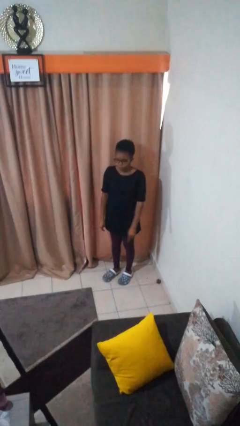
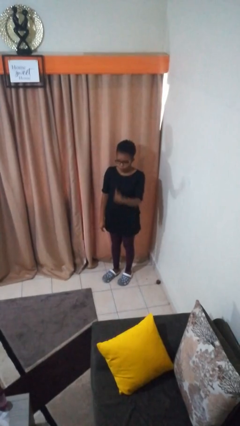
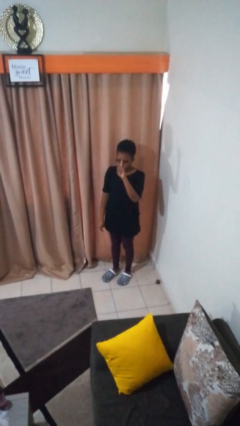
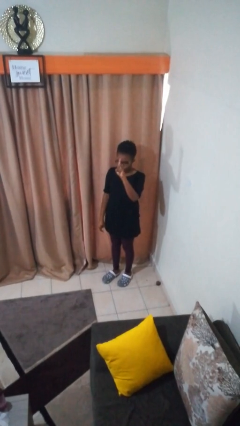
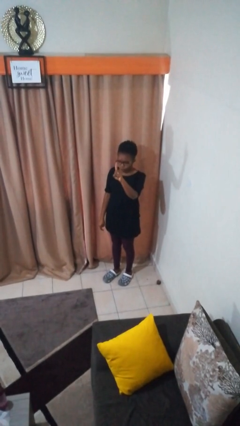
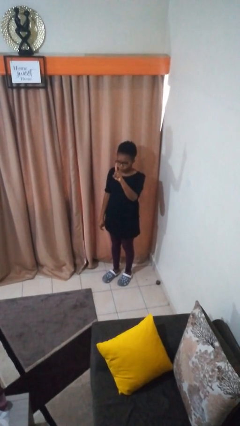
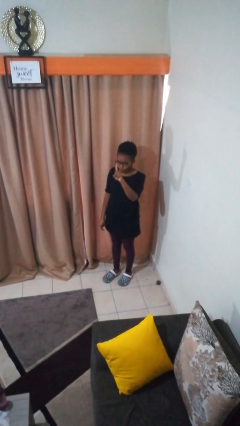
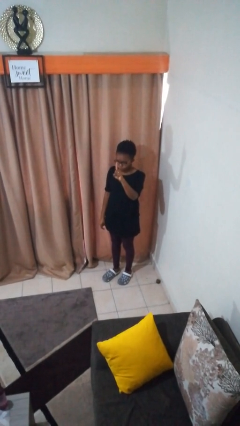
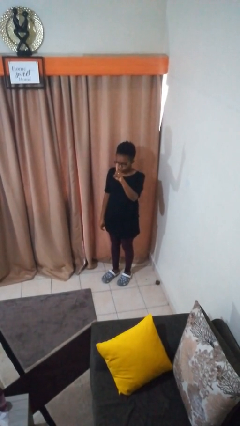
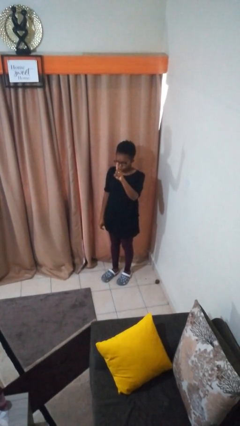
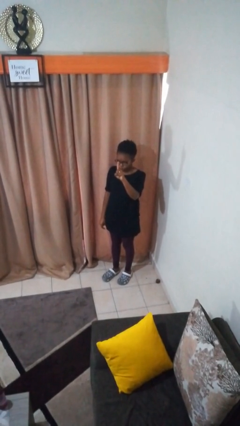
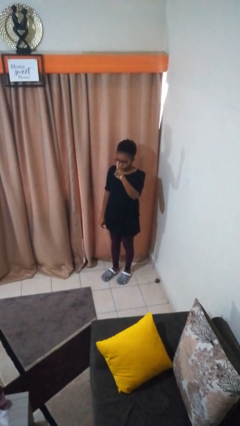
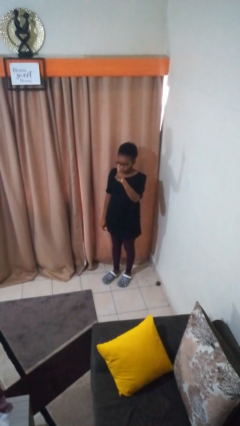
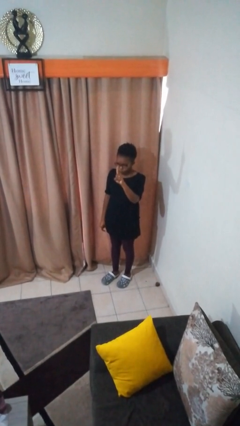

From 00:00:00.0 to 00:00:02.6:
person gestures number one

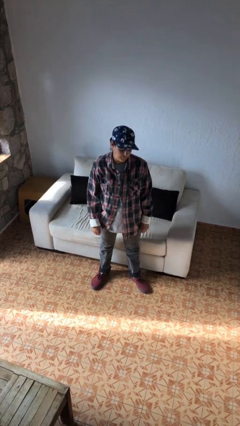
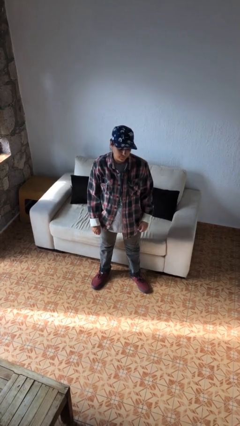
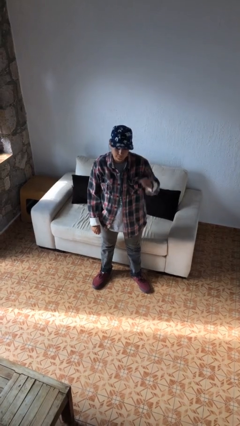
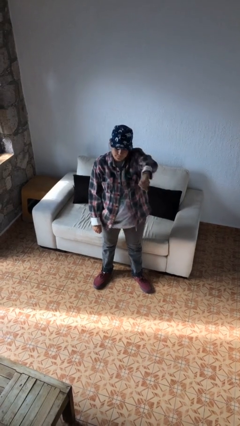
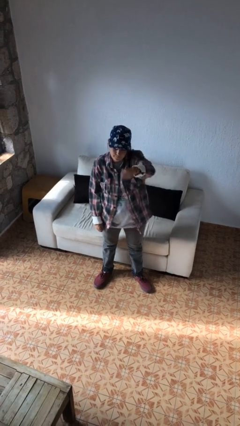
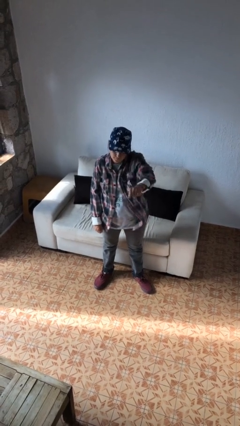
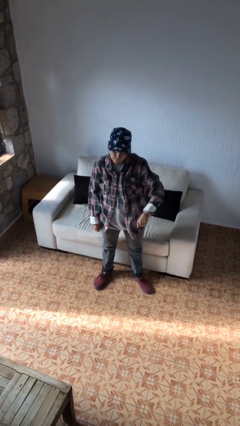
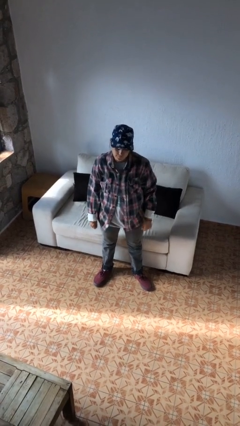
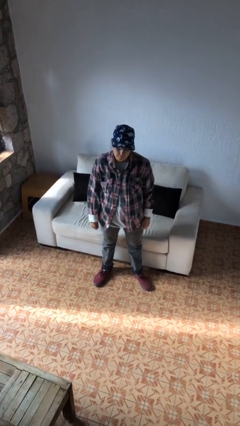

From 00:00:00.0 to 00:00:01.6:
person punches

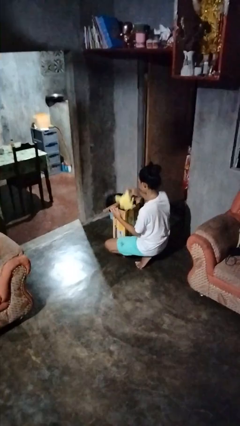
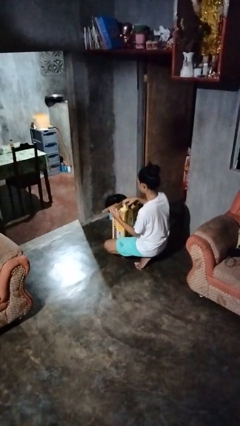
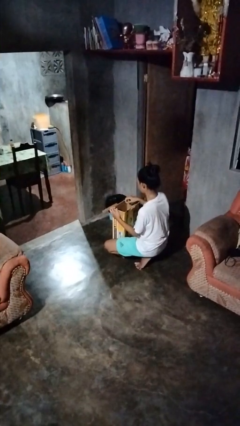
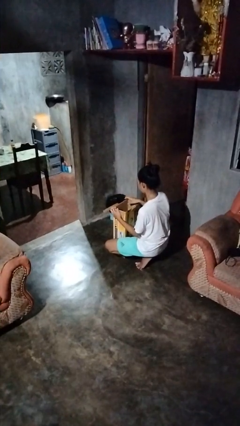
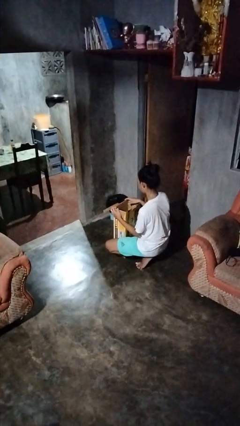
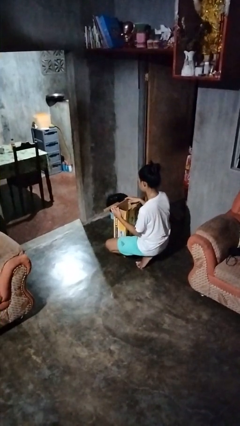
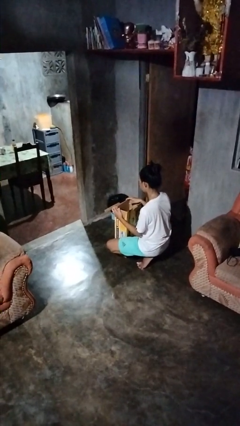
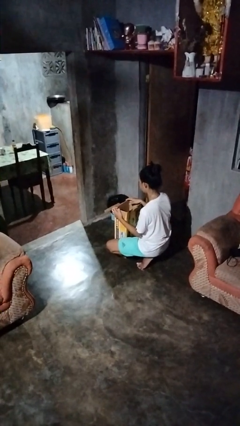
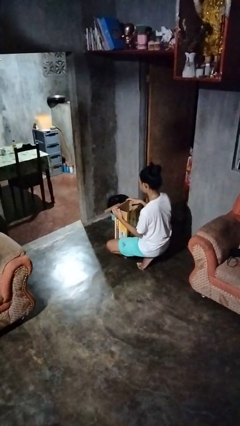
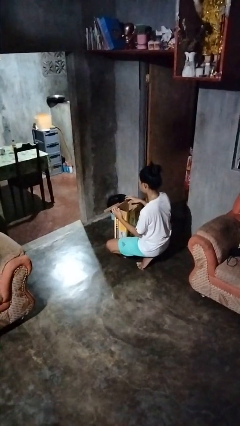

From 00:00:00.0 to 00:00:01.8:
person puts object into box

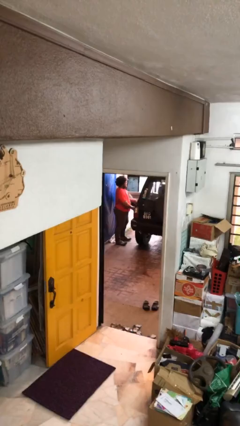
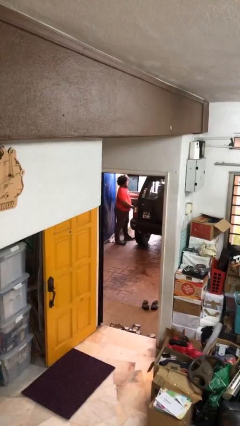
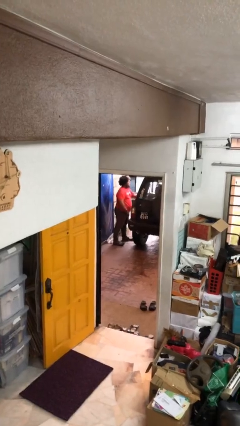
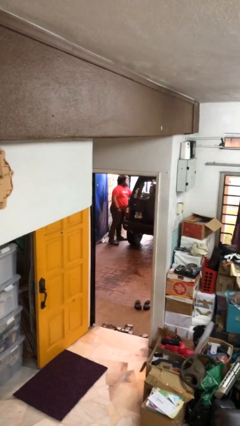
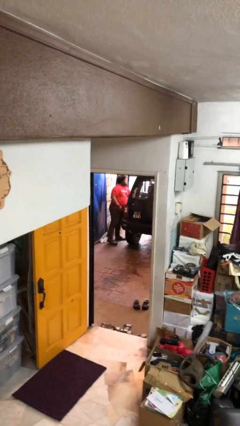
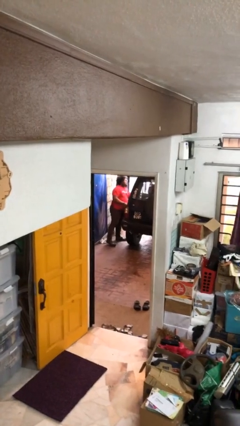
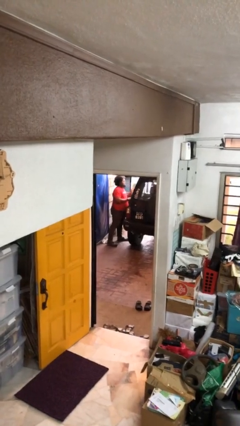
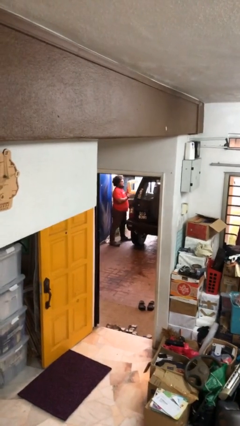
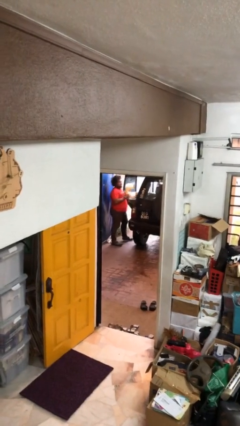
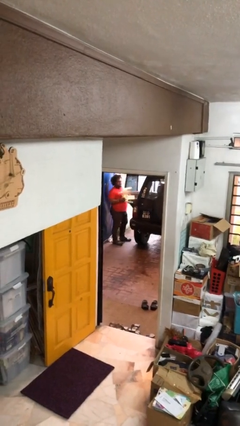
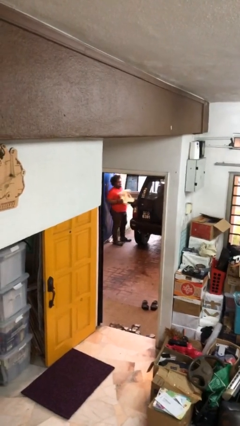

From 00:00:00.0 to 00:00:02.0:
person unloads car

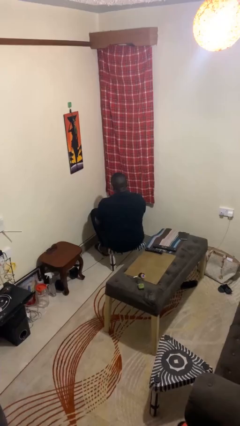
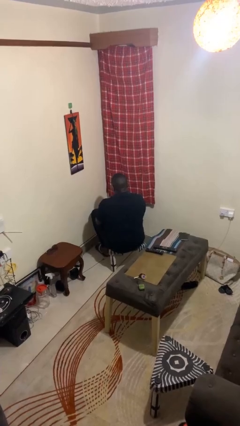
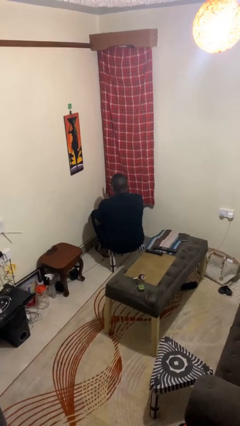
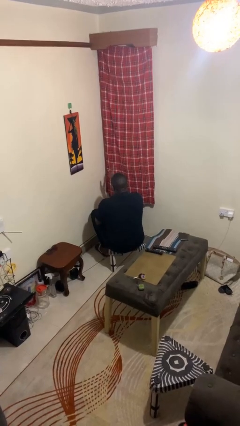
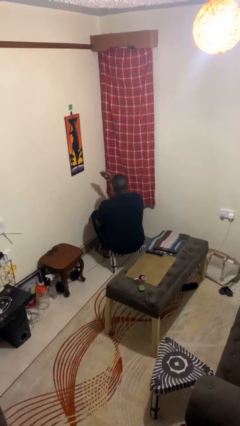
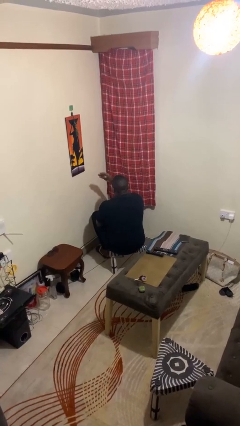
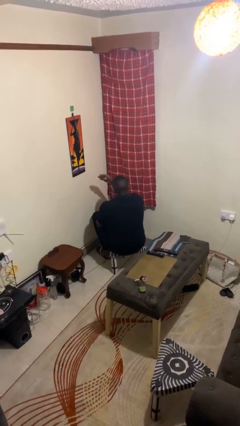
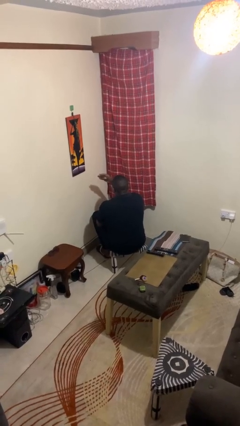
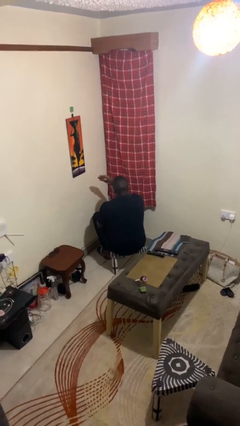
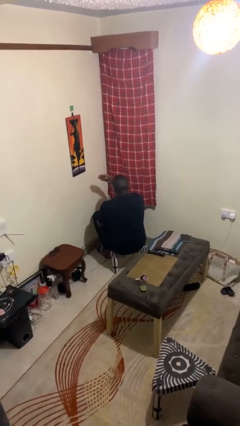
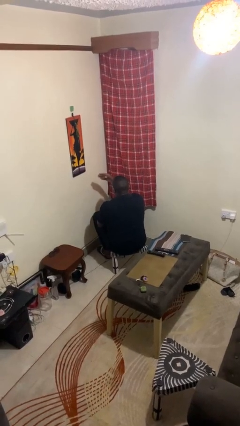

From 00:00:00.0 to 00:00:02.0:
person gestures swipe left

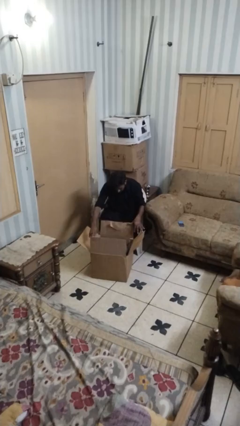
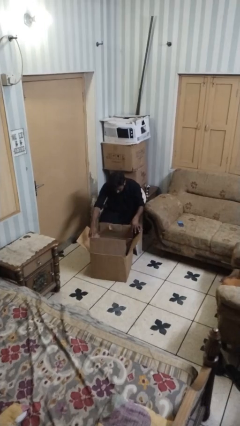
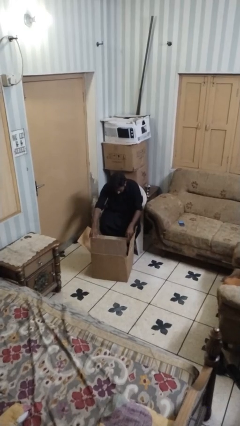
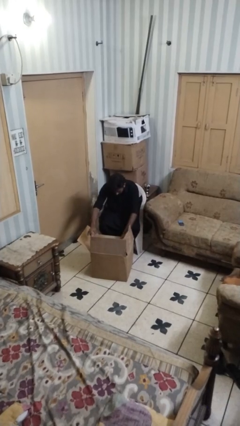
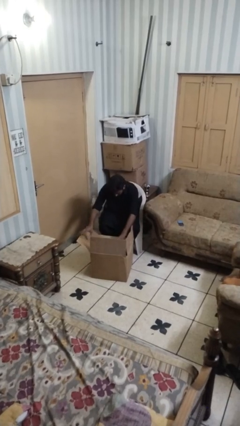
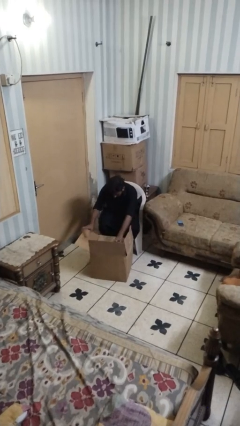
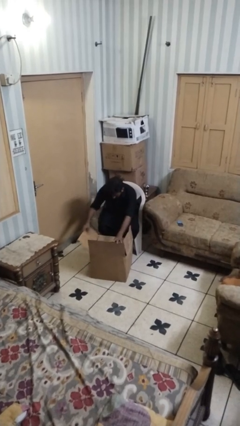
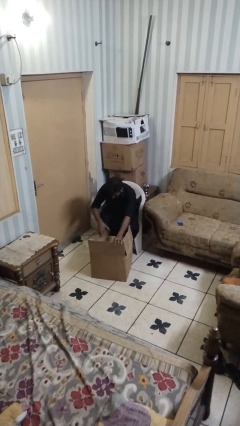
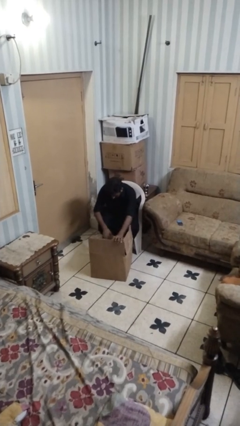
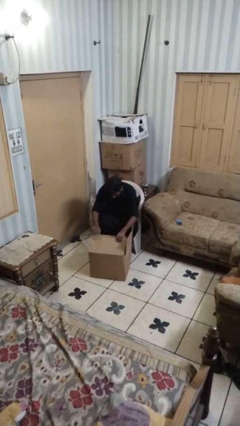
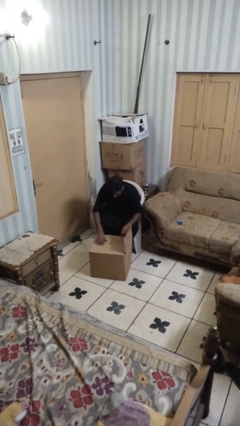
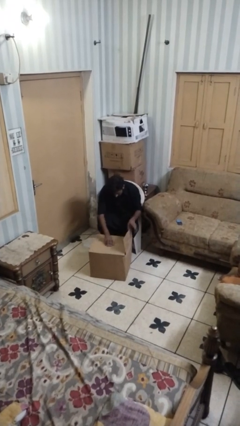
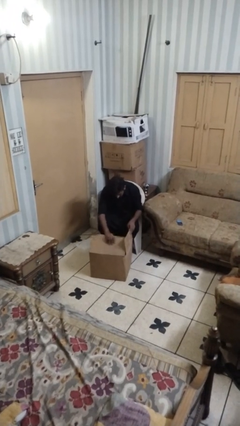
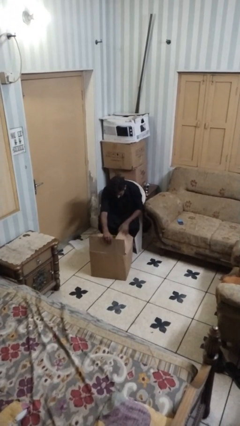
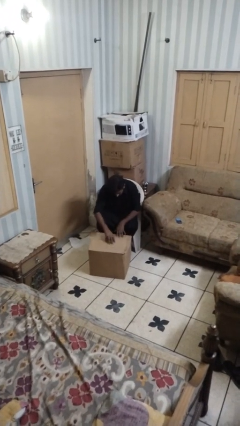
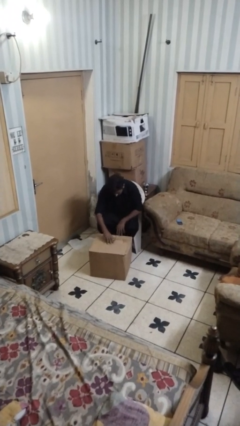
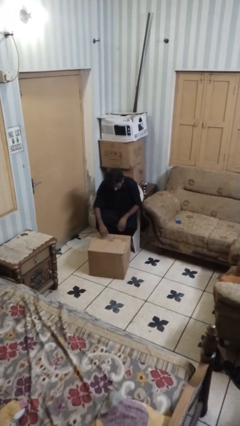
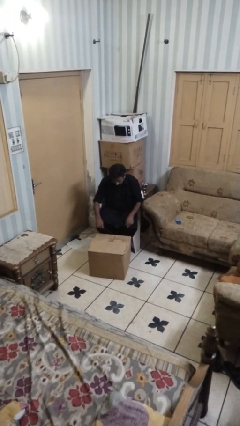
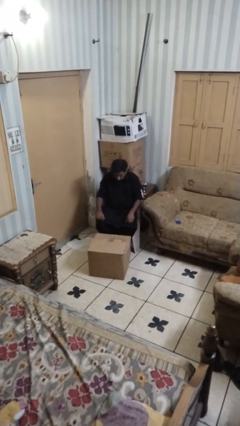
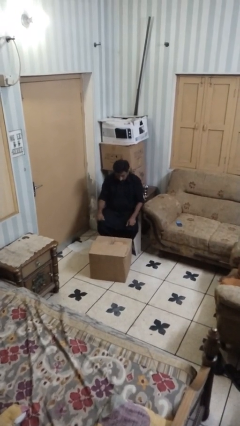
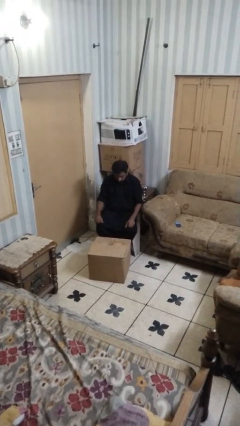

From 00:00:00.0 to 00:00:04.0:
person closes box

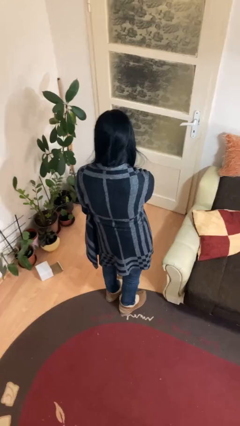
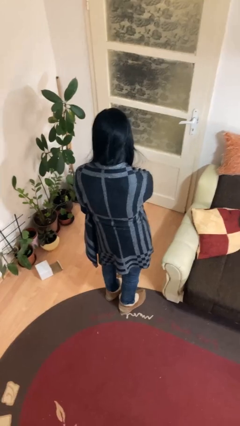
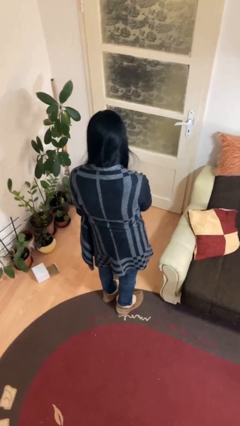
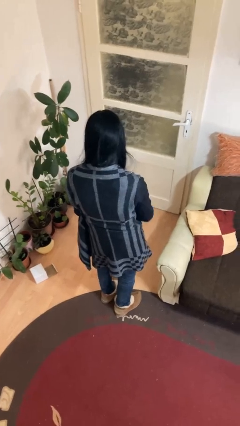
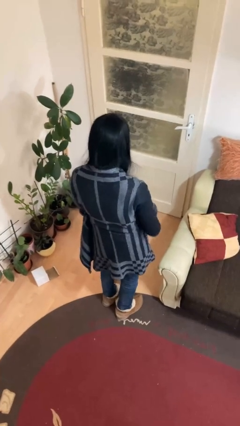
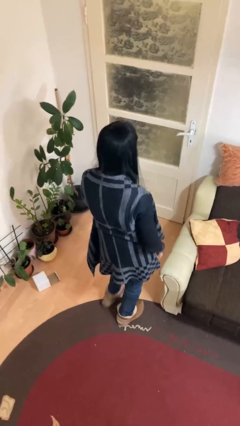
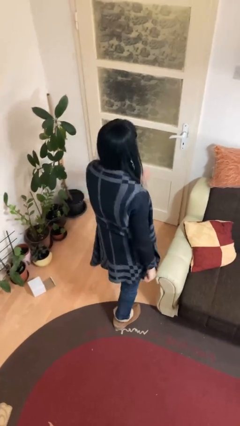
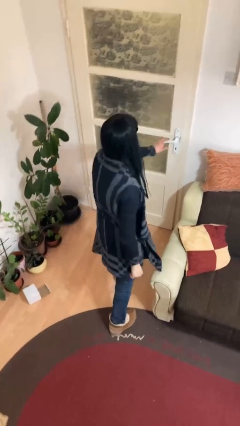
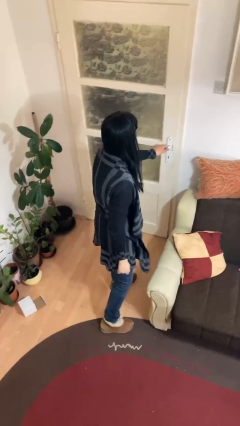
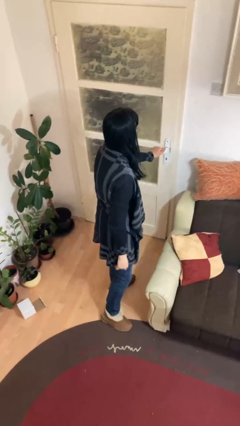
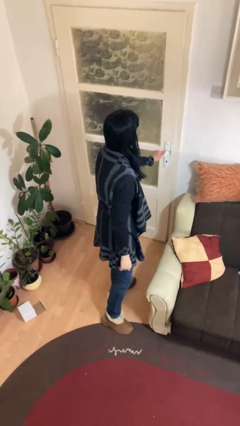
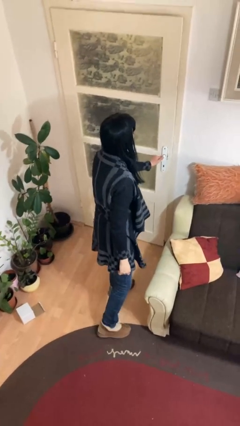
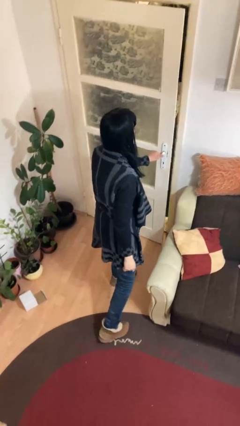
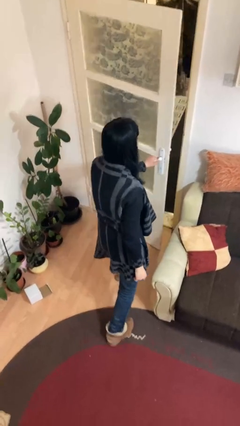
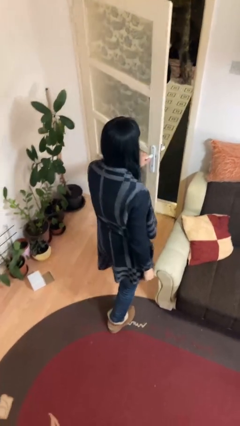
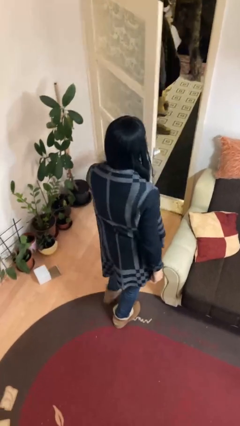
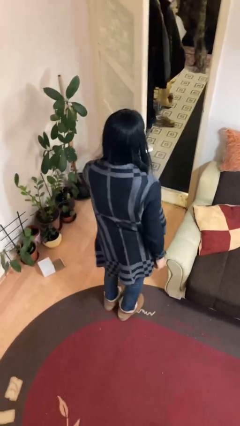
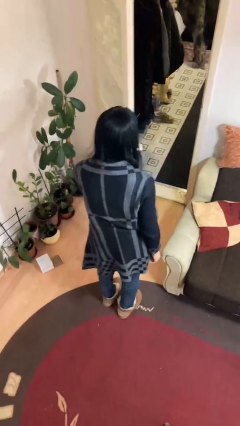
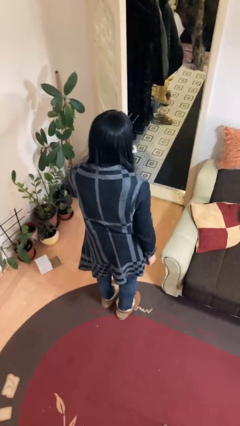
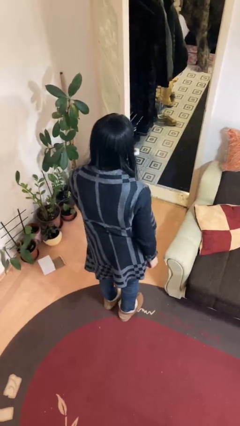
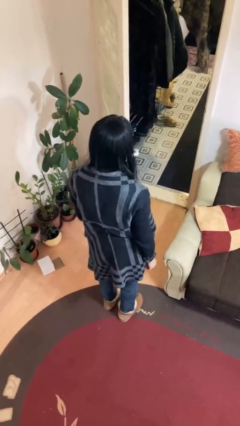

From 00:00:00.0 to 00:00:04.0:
person opens facility door
